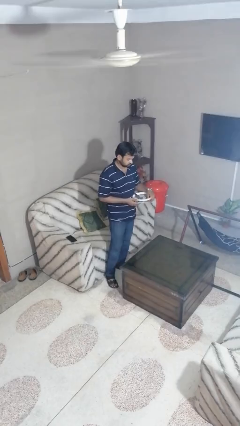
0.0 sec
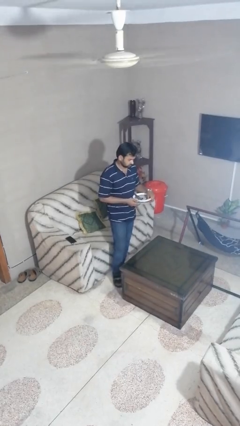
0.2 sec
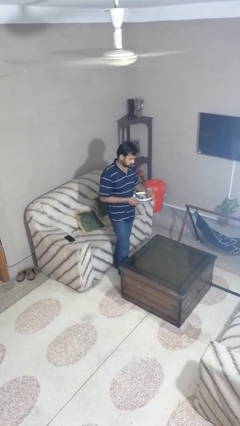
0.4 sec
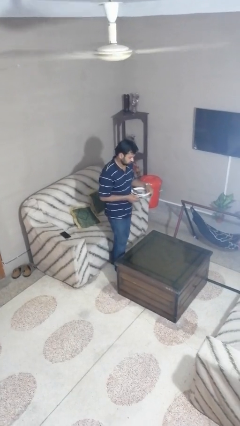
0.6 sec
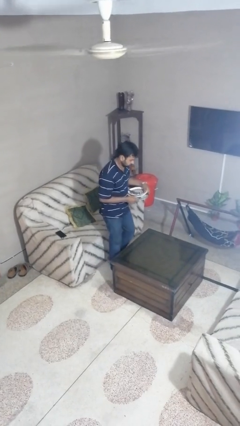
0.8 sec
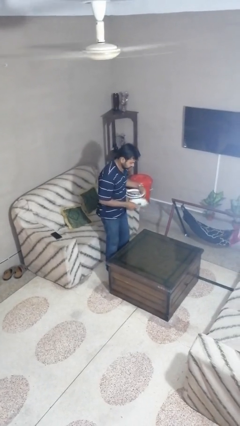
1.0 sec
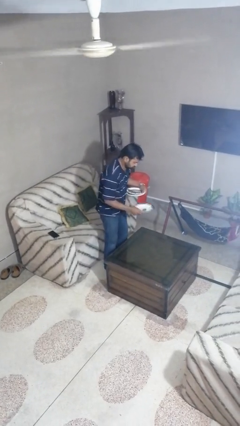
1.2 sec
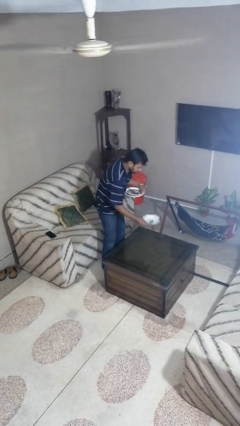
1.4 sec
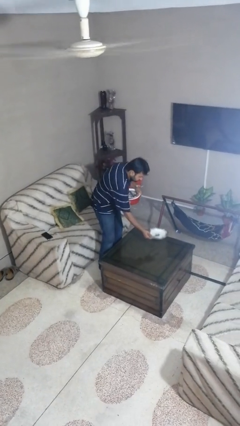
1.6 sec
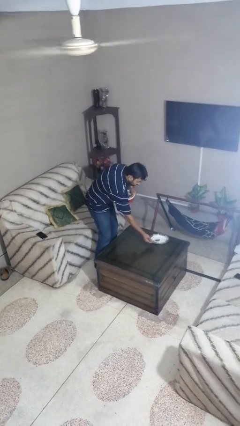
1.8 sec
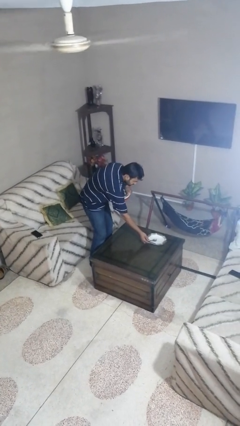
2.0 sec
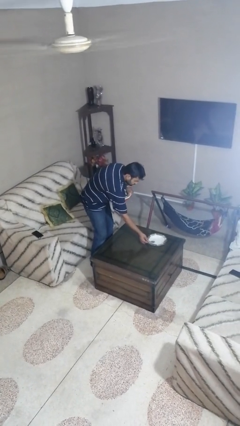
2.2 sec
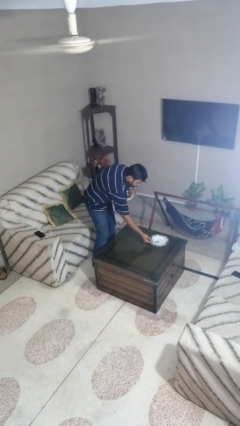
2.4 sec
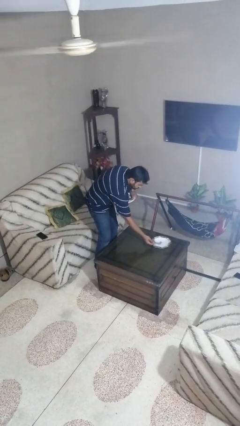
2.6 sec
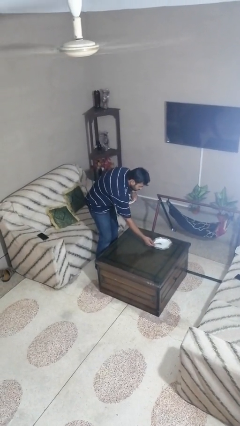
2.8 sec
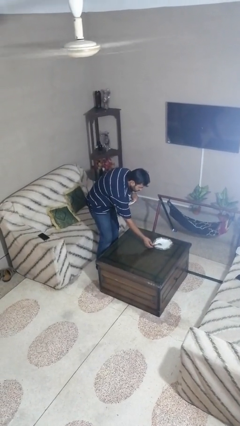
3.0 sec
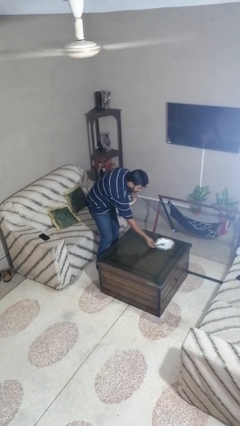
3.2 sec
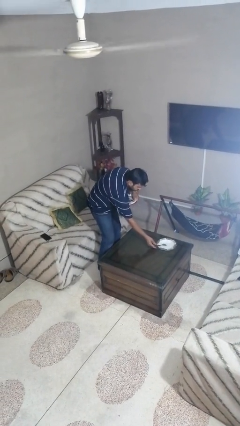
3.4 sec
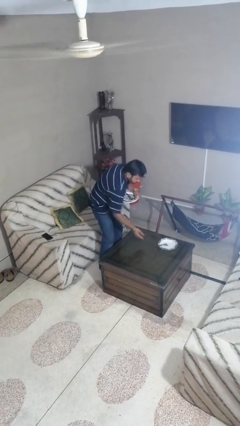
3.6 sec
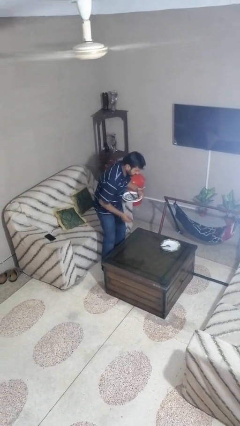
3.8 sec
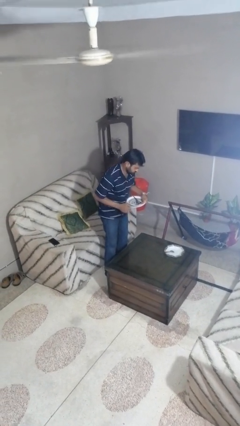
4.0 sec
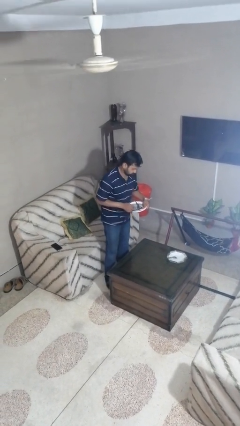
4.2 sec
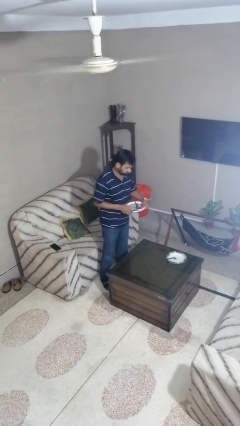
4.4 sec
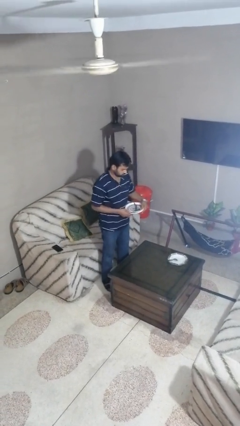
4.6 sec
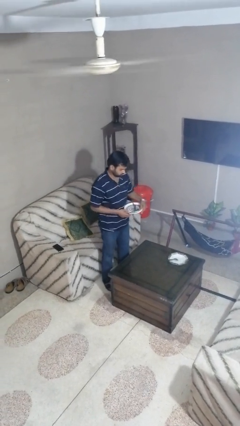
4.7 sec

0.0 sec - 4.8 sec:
person sets table

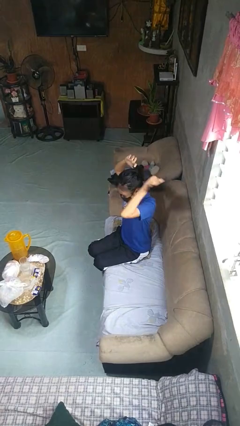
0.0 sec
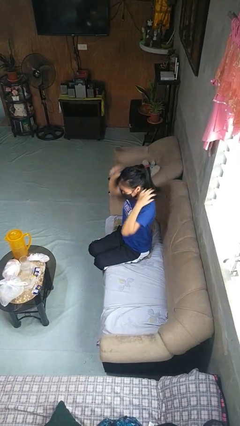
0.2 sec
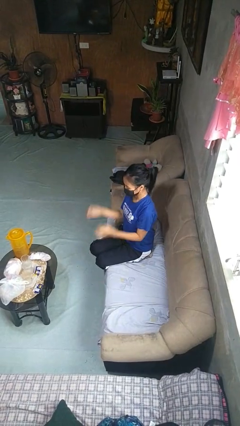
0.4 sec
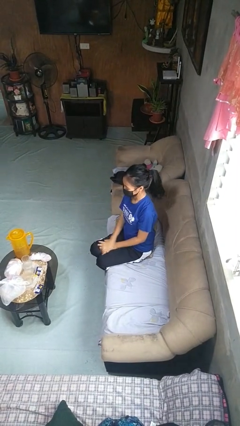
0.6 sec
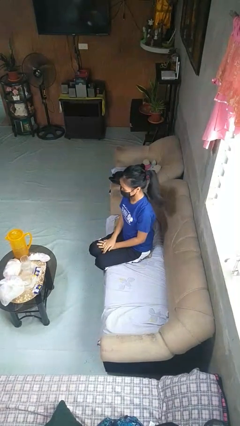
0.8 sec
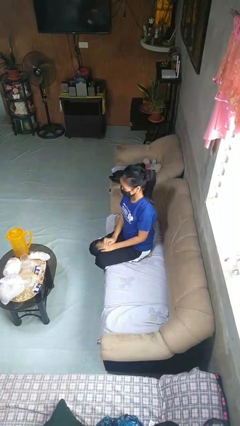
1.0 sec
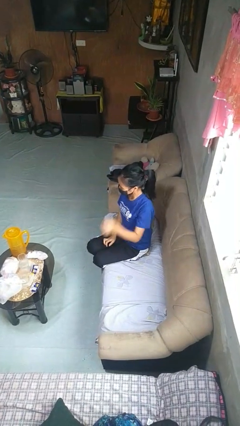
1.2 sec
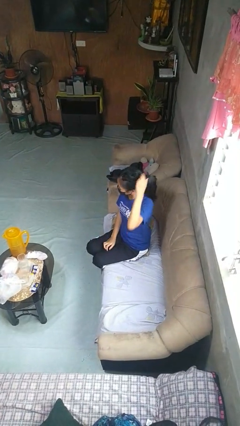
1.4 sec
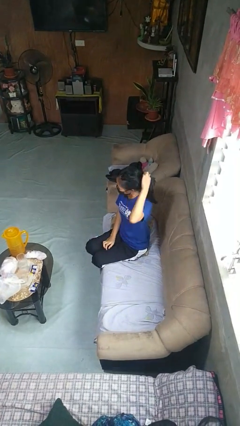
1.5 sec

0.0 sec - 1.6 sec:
person takes off hairtie

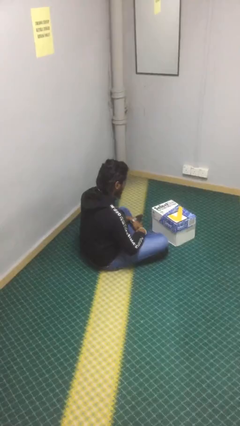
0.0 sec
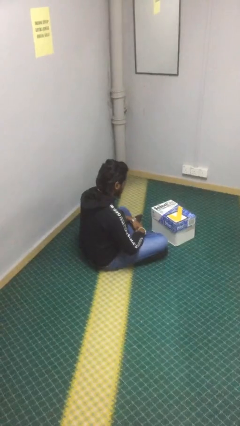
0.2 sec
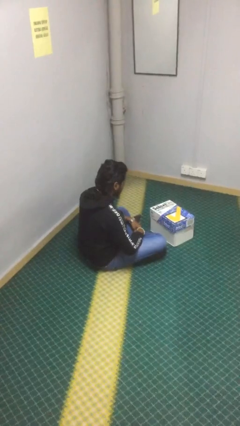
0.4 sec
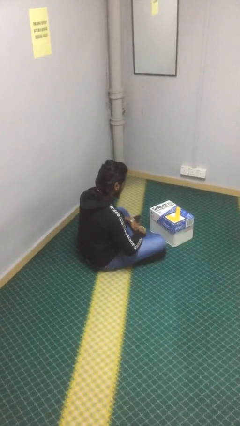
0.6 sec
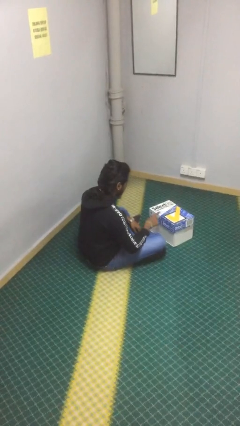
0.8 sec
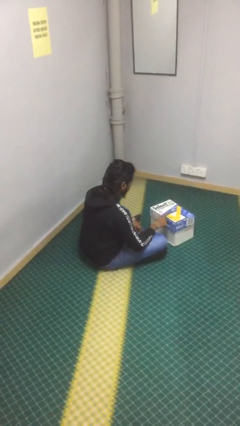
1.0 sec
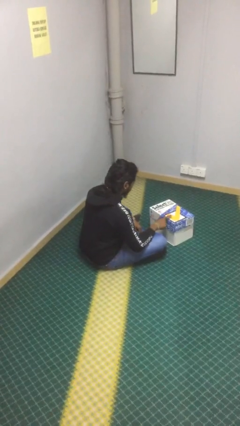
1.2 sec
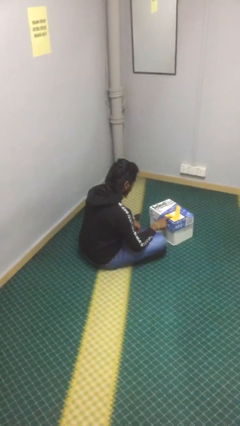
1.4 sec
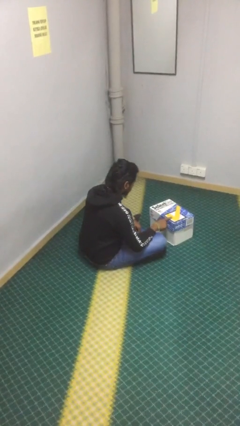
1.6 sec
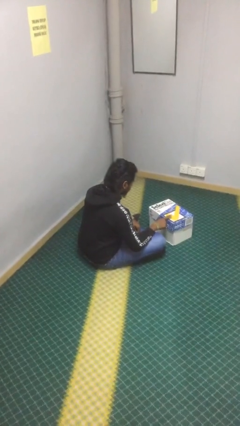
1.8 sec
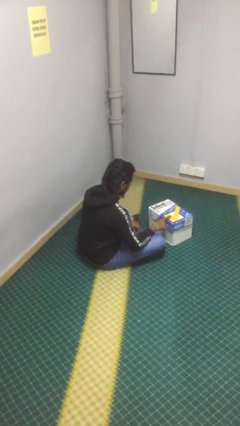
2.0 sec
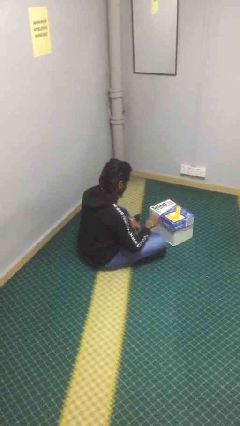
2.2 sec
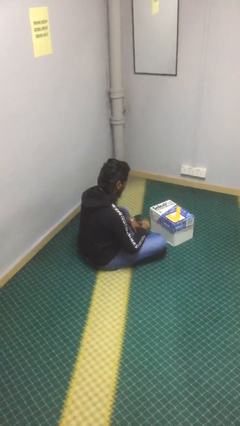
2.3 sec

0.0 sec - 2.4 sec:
person taps object with finger

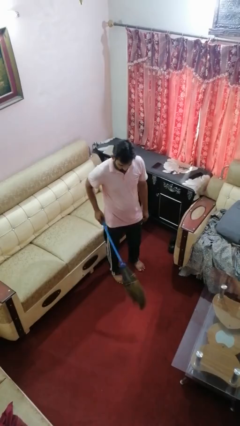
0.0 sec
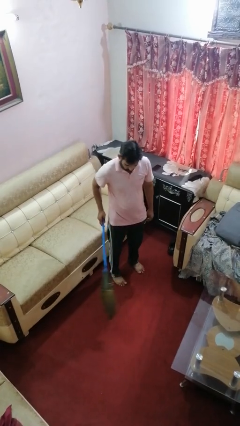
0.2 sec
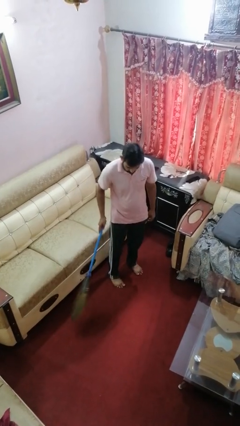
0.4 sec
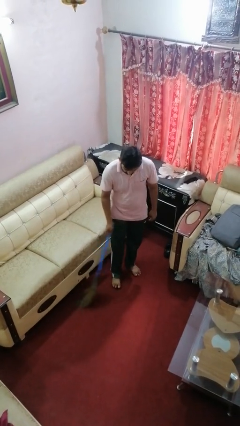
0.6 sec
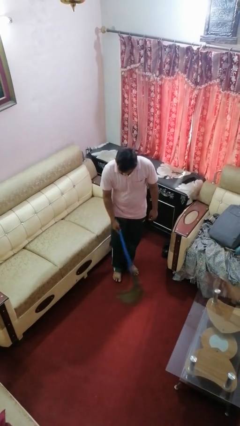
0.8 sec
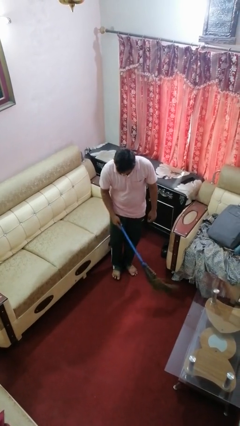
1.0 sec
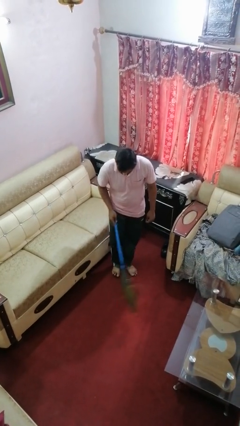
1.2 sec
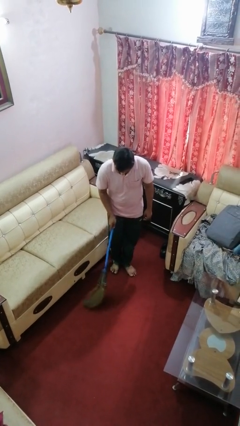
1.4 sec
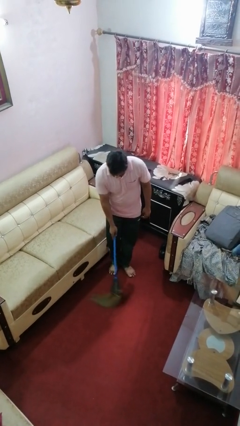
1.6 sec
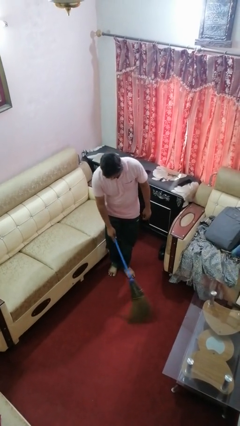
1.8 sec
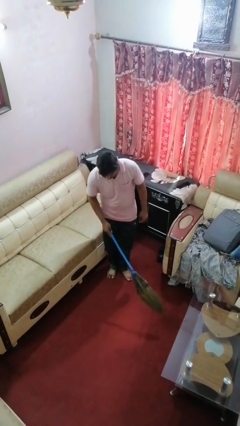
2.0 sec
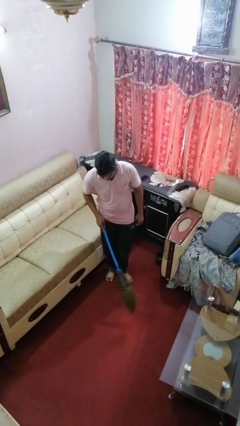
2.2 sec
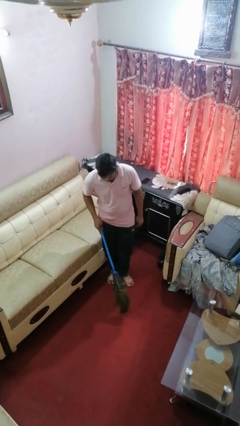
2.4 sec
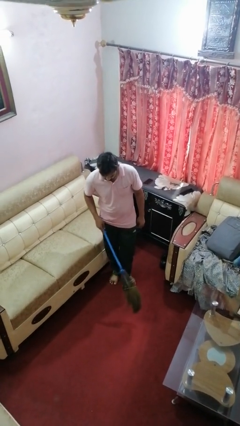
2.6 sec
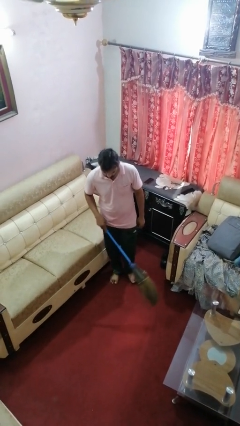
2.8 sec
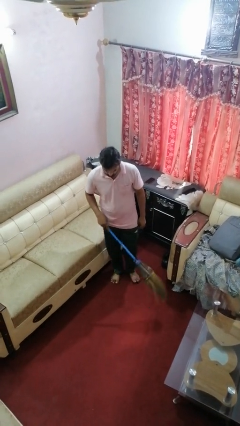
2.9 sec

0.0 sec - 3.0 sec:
person sweeps floor

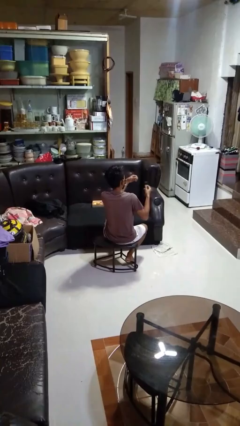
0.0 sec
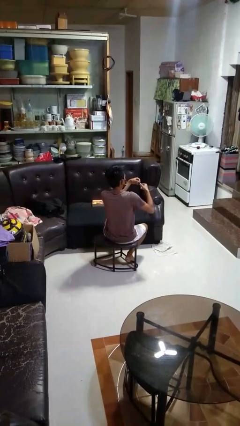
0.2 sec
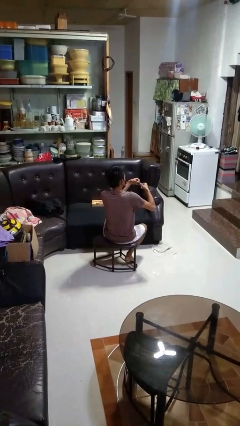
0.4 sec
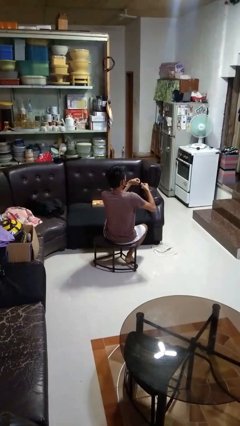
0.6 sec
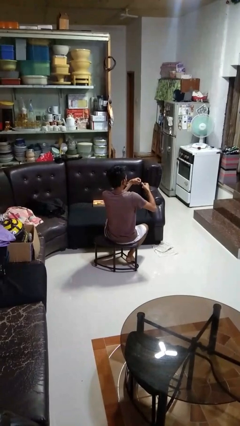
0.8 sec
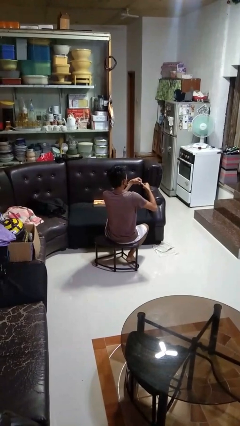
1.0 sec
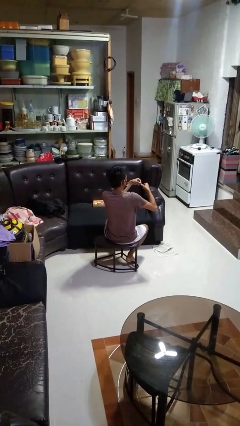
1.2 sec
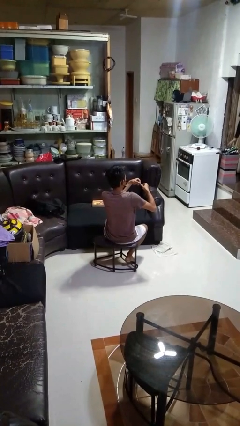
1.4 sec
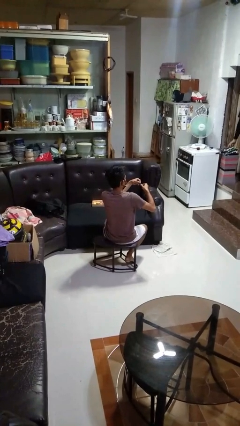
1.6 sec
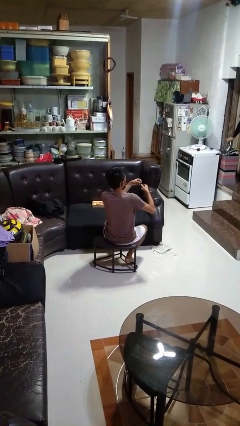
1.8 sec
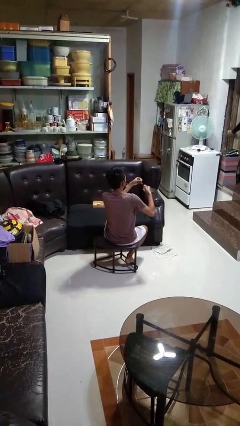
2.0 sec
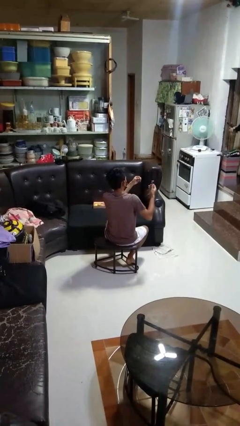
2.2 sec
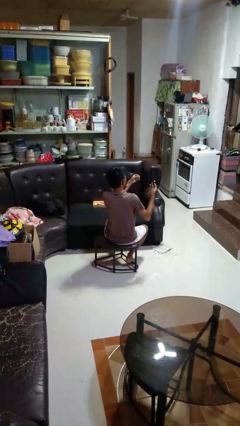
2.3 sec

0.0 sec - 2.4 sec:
person clips fingernails

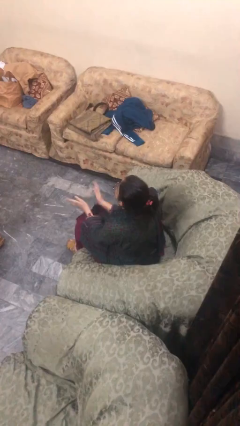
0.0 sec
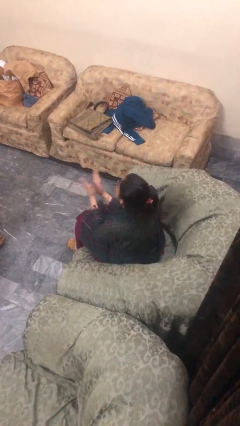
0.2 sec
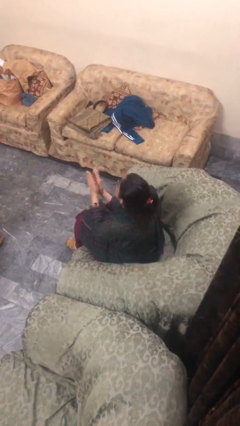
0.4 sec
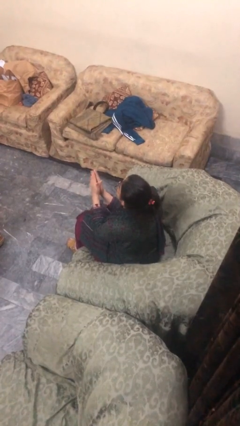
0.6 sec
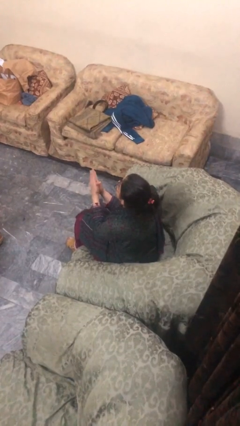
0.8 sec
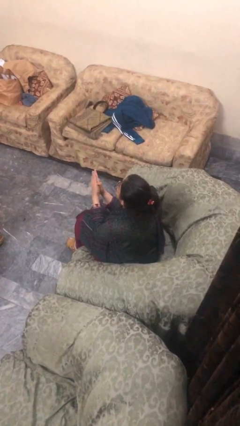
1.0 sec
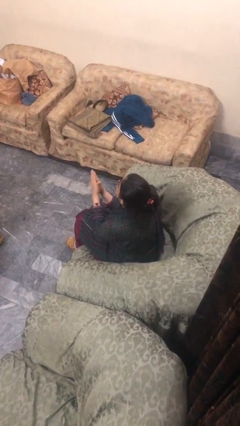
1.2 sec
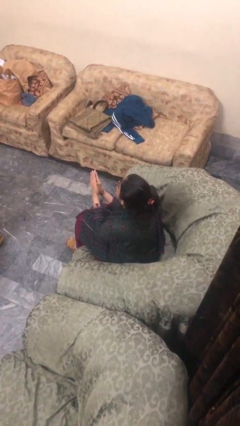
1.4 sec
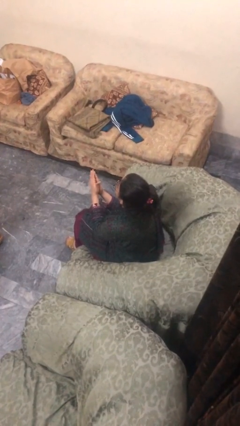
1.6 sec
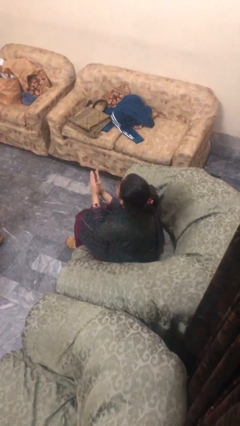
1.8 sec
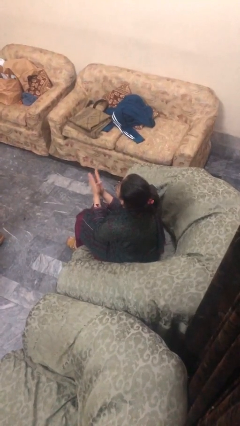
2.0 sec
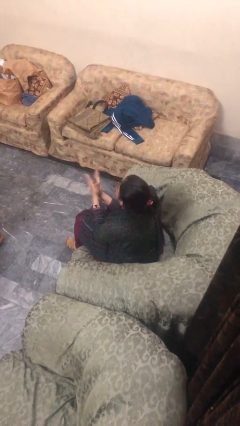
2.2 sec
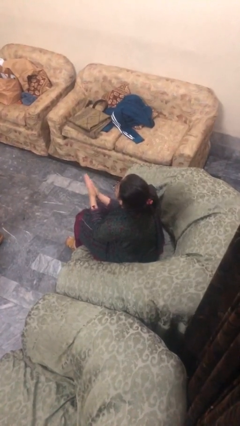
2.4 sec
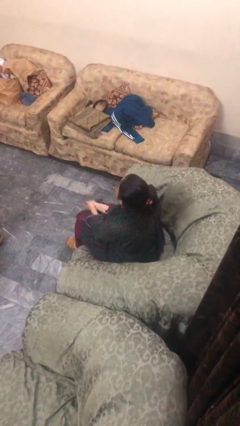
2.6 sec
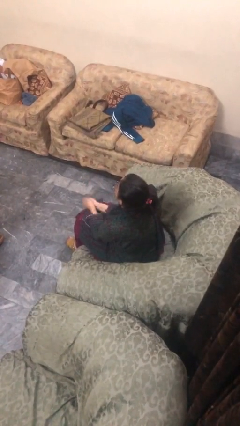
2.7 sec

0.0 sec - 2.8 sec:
person claps hands

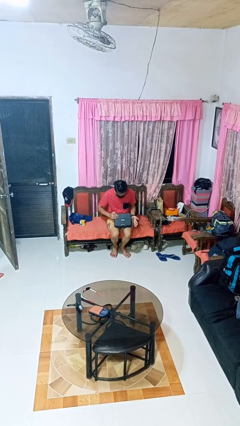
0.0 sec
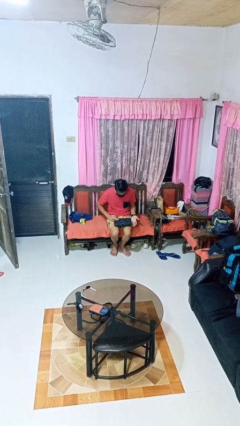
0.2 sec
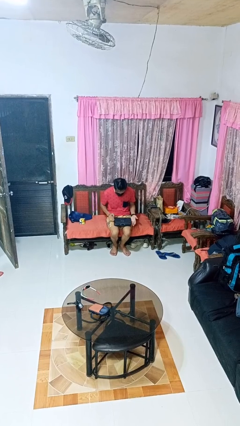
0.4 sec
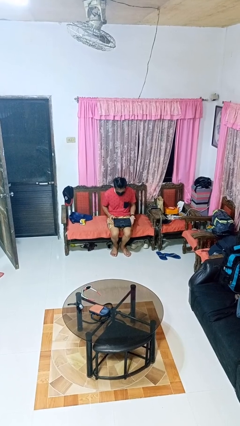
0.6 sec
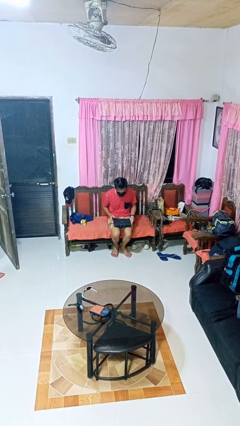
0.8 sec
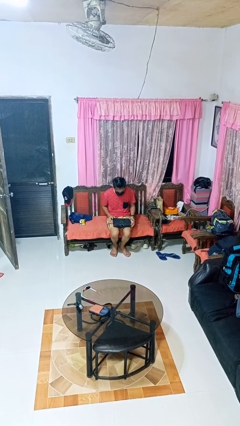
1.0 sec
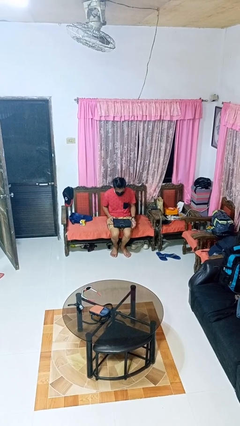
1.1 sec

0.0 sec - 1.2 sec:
person closes laptop
